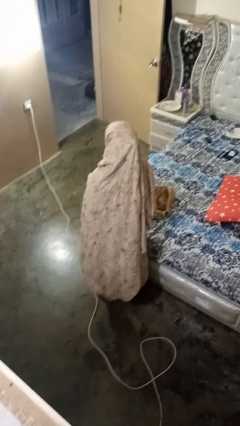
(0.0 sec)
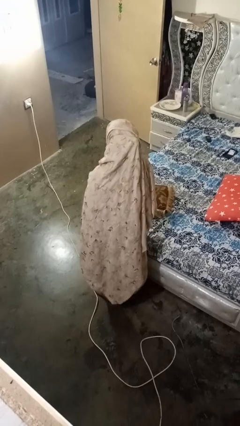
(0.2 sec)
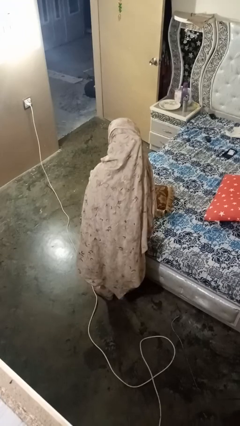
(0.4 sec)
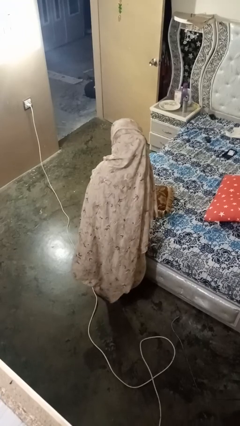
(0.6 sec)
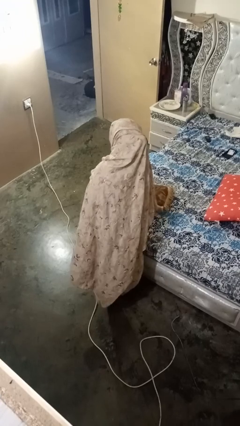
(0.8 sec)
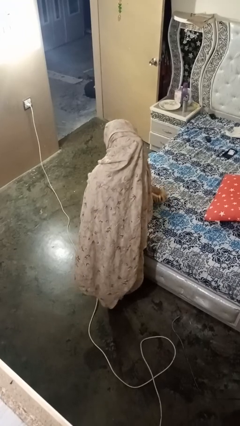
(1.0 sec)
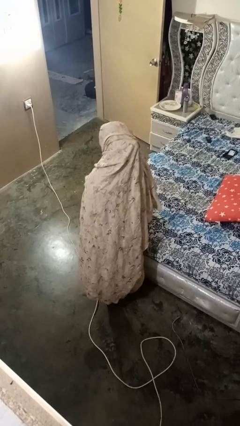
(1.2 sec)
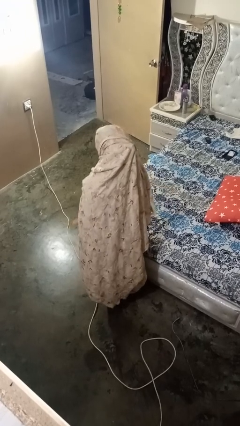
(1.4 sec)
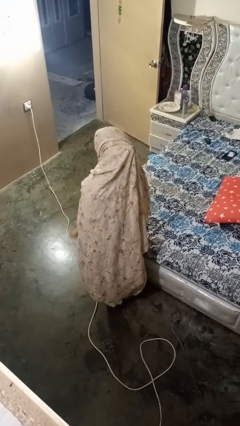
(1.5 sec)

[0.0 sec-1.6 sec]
person picks up object from bed

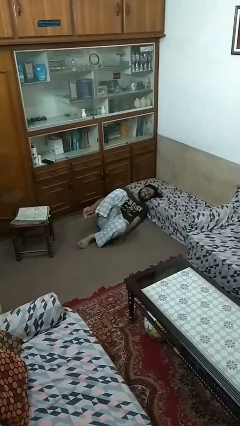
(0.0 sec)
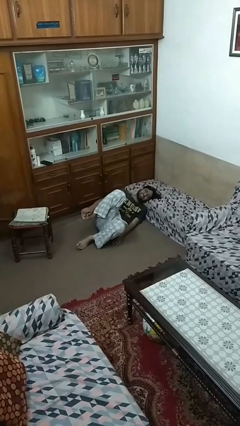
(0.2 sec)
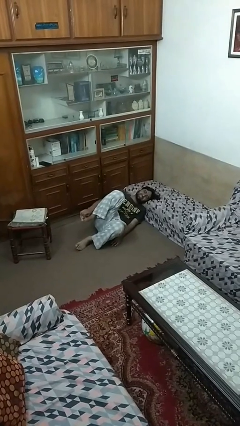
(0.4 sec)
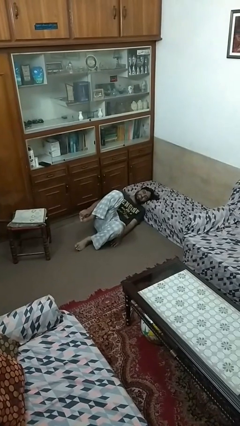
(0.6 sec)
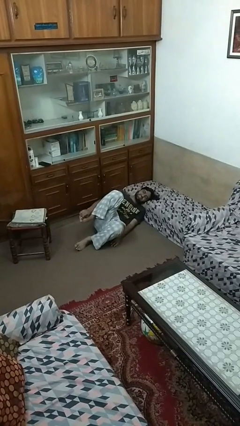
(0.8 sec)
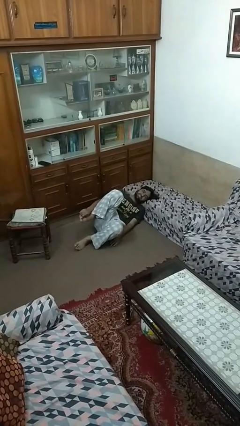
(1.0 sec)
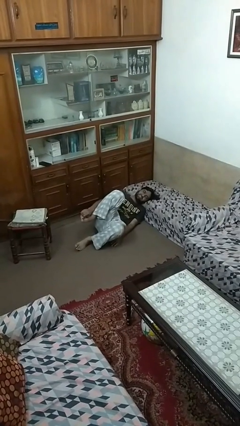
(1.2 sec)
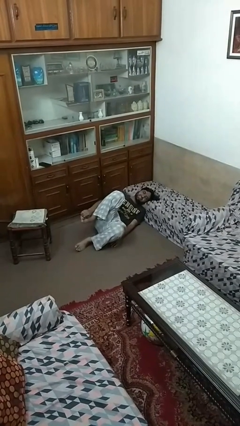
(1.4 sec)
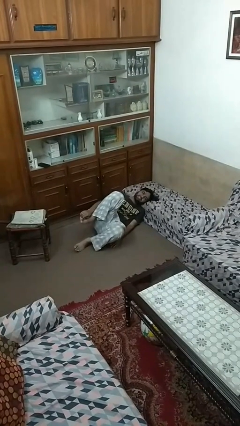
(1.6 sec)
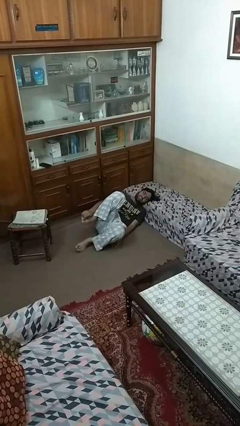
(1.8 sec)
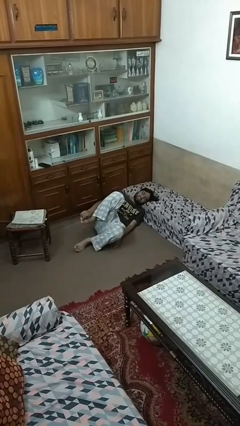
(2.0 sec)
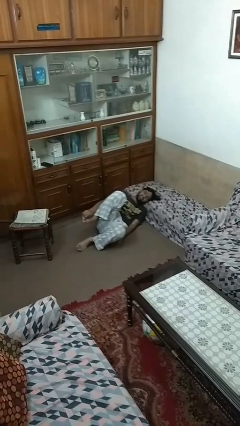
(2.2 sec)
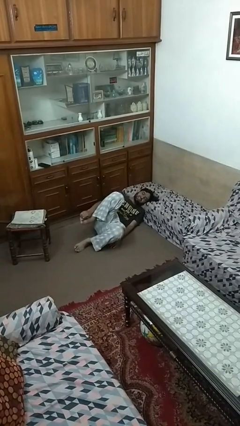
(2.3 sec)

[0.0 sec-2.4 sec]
person lies down on floor

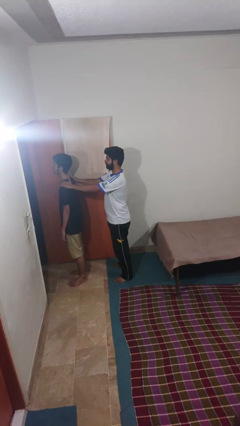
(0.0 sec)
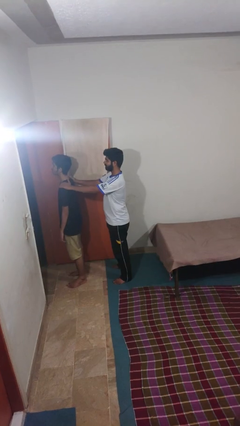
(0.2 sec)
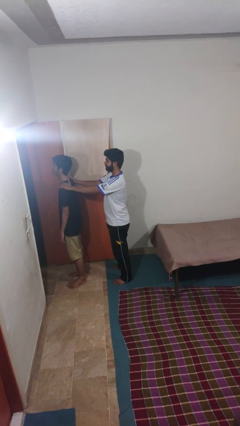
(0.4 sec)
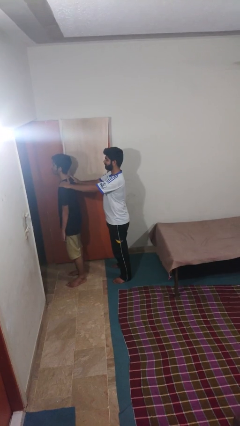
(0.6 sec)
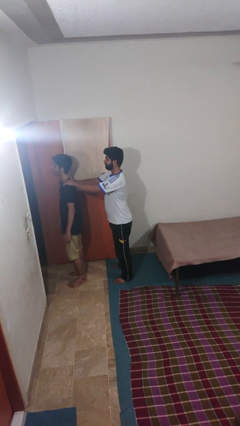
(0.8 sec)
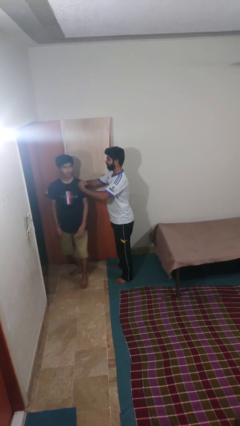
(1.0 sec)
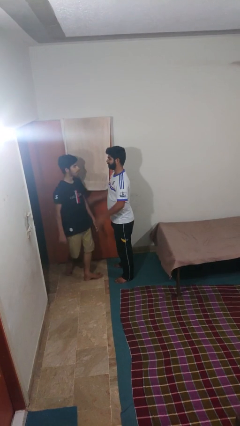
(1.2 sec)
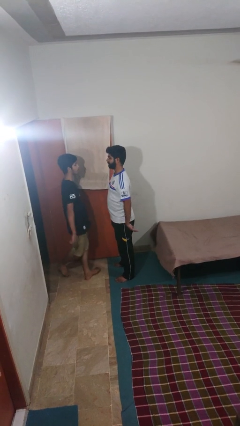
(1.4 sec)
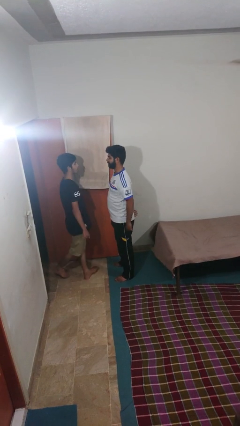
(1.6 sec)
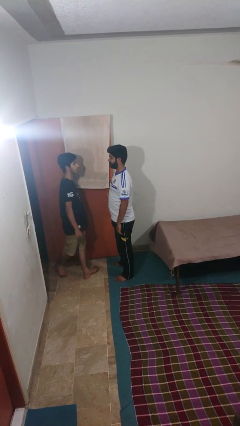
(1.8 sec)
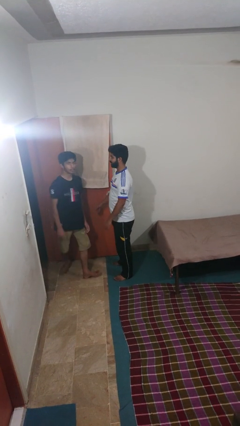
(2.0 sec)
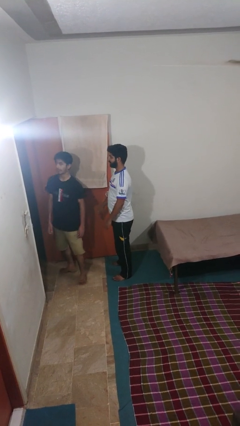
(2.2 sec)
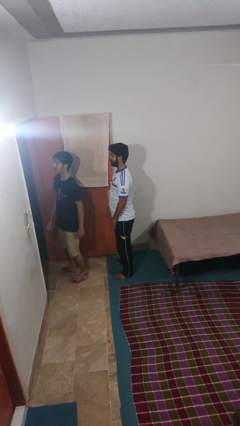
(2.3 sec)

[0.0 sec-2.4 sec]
person spins person around

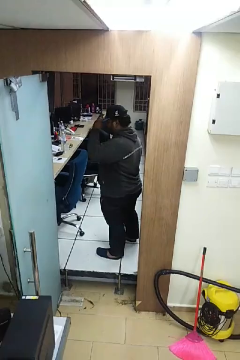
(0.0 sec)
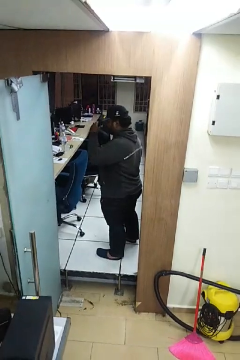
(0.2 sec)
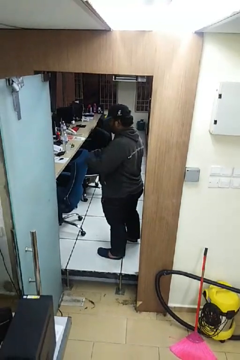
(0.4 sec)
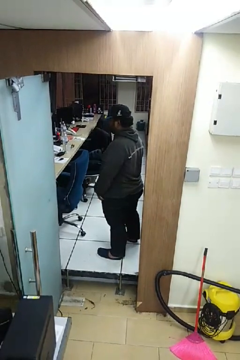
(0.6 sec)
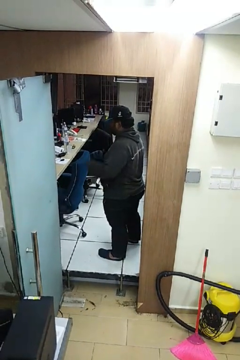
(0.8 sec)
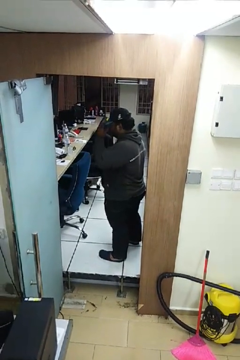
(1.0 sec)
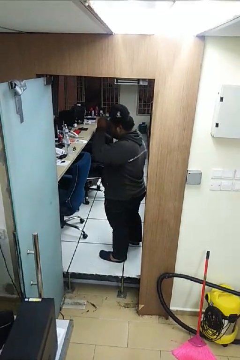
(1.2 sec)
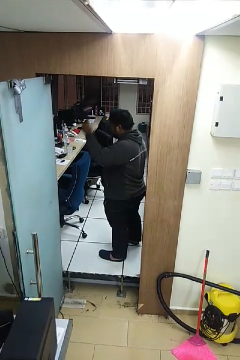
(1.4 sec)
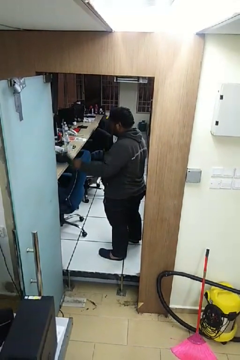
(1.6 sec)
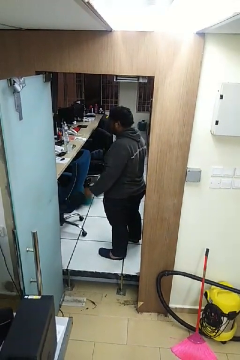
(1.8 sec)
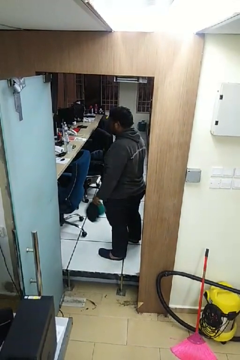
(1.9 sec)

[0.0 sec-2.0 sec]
person takes off hat

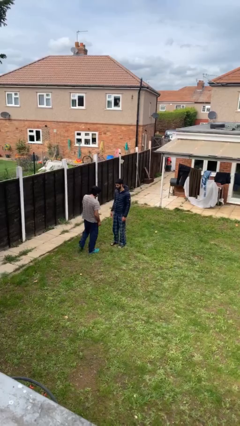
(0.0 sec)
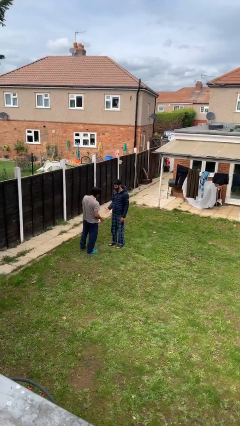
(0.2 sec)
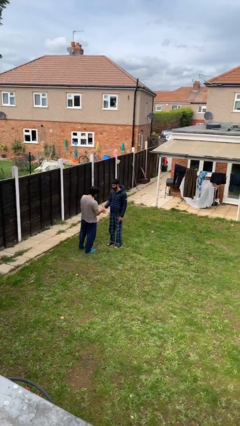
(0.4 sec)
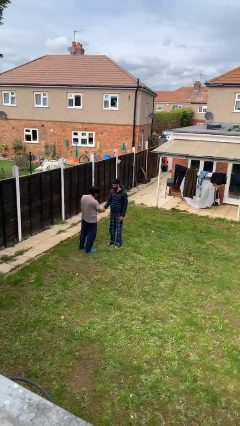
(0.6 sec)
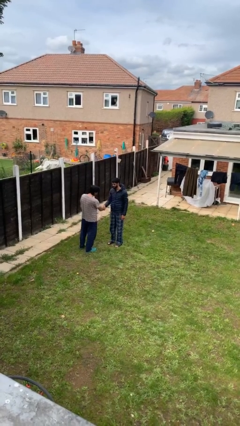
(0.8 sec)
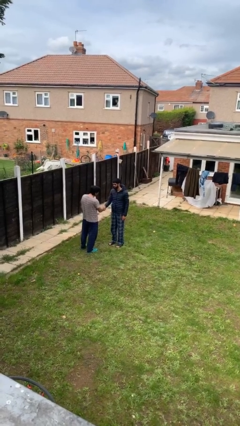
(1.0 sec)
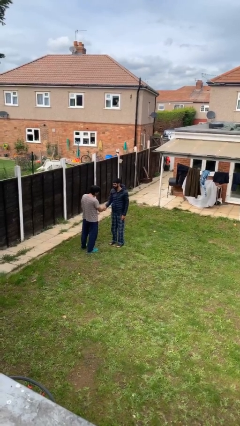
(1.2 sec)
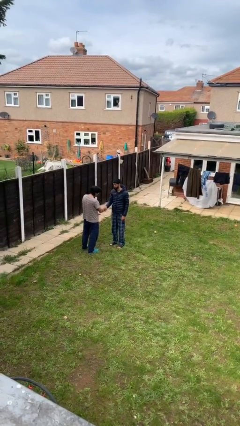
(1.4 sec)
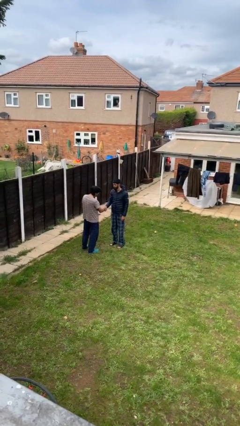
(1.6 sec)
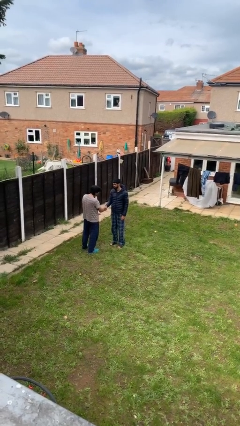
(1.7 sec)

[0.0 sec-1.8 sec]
person shakes hand

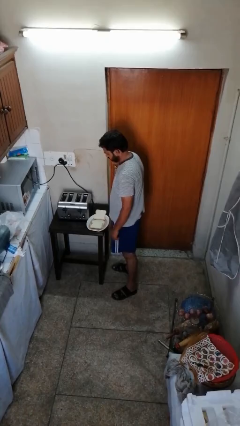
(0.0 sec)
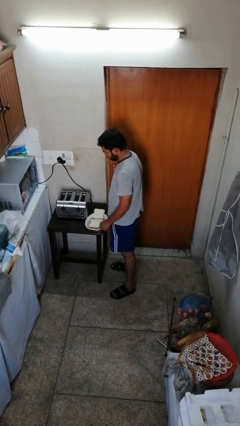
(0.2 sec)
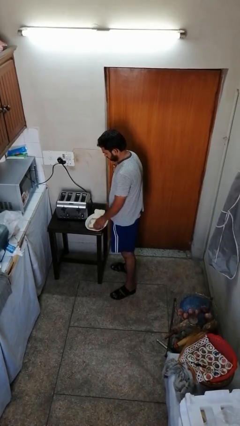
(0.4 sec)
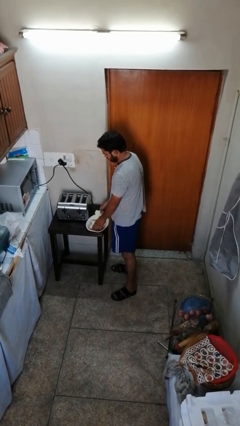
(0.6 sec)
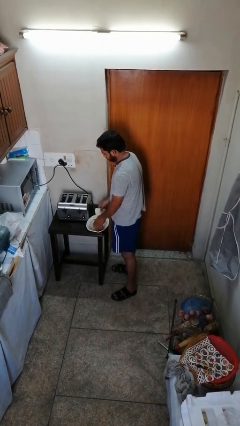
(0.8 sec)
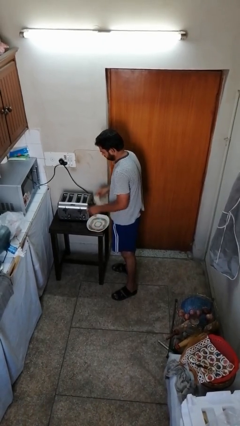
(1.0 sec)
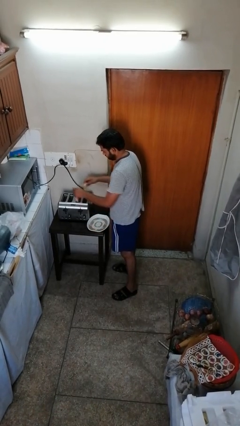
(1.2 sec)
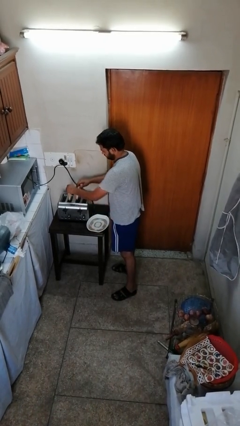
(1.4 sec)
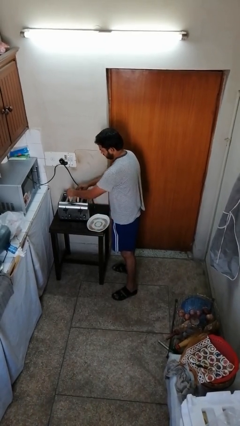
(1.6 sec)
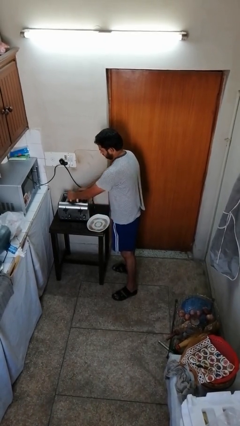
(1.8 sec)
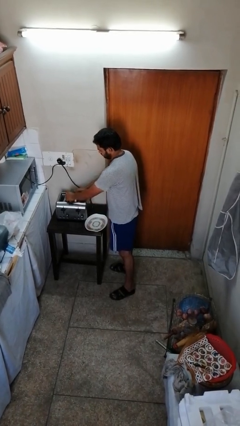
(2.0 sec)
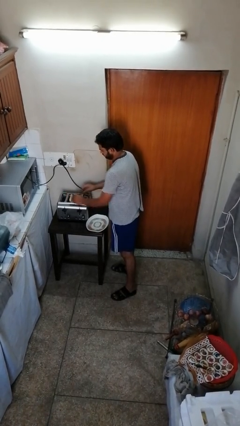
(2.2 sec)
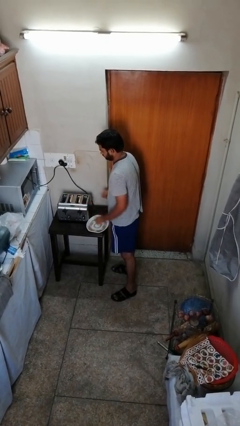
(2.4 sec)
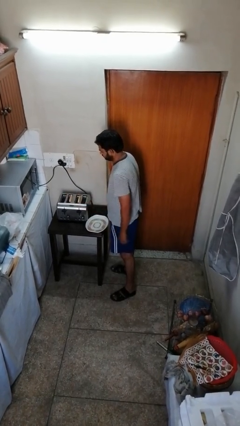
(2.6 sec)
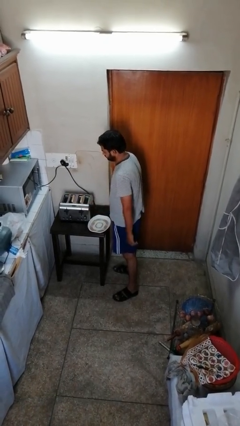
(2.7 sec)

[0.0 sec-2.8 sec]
person puts object into toaster

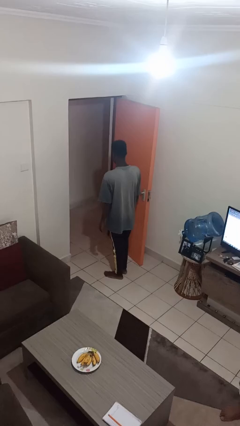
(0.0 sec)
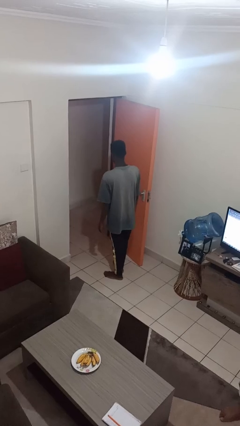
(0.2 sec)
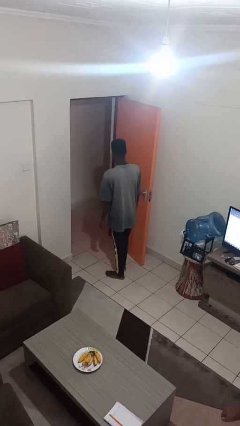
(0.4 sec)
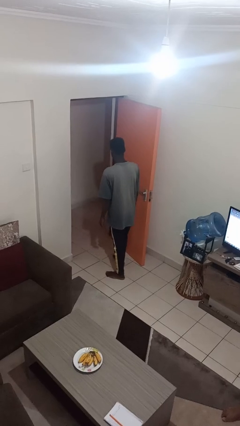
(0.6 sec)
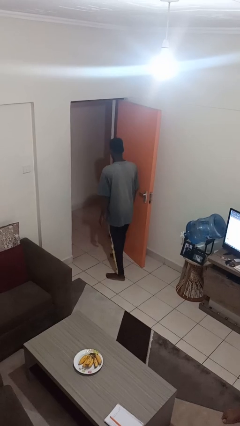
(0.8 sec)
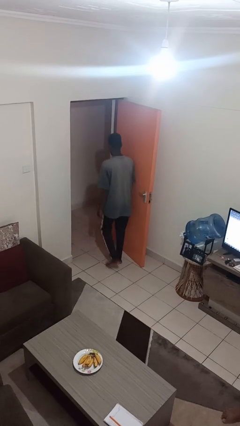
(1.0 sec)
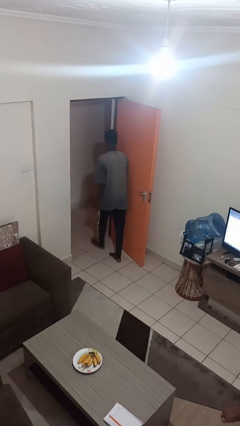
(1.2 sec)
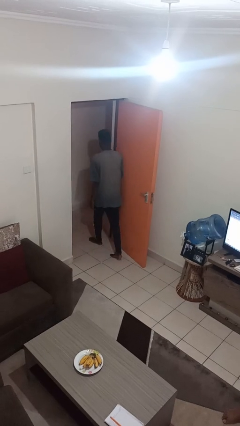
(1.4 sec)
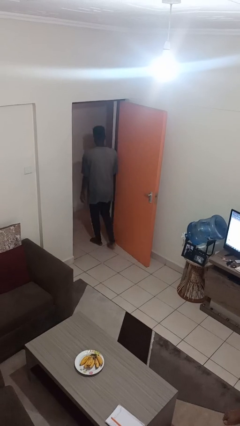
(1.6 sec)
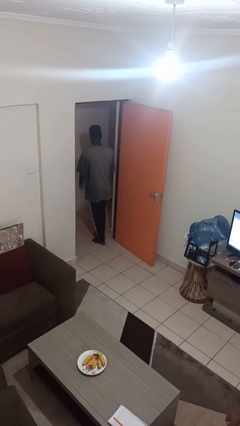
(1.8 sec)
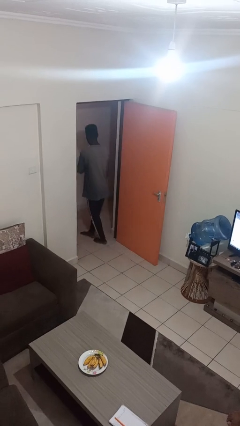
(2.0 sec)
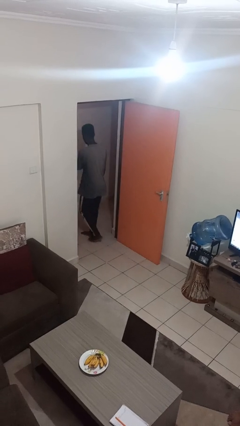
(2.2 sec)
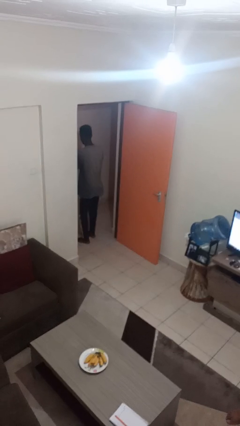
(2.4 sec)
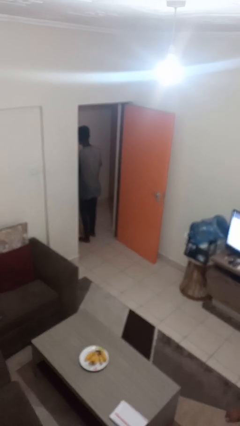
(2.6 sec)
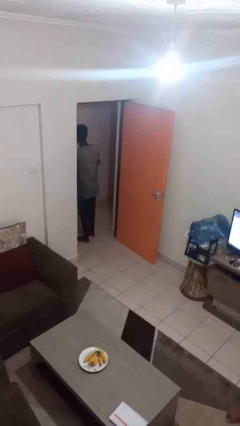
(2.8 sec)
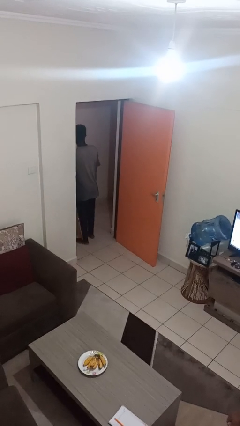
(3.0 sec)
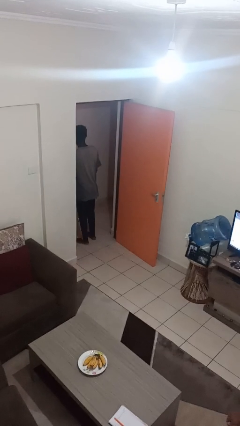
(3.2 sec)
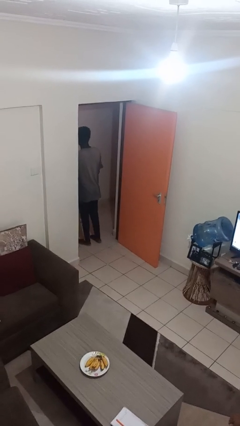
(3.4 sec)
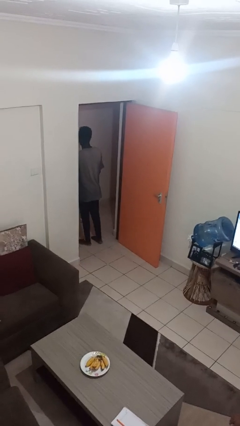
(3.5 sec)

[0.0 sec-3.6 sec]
person bumps into wall

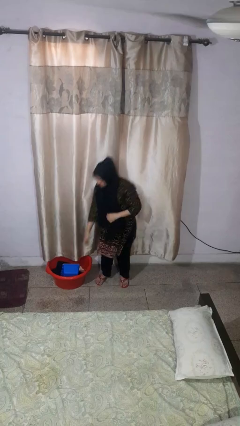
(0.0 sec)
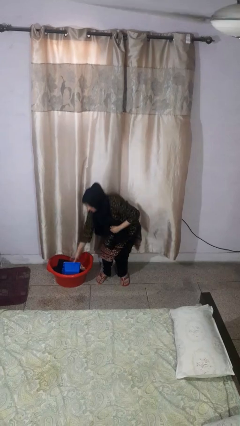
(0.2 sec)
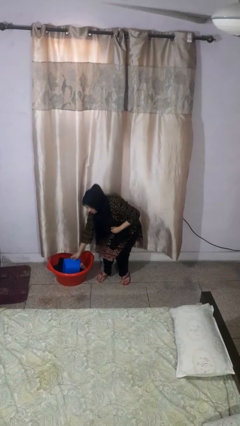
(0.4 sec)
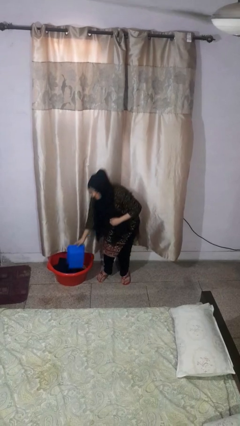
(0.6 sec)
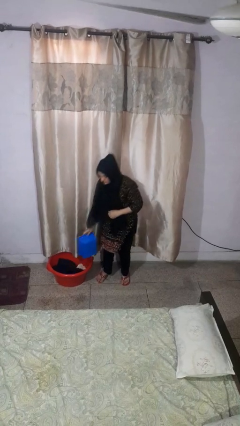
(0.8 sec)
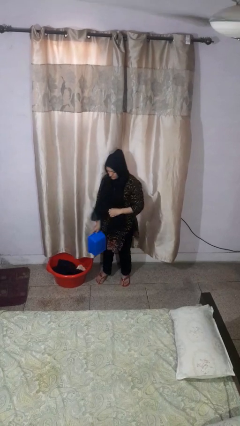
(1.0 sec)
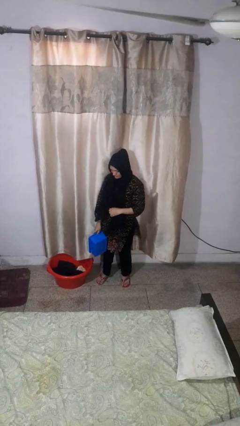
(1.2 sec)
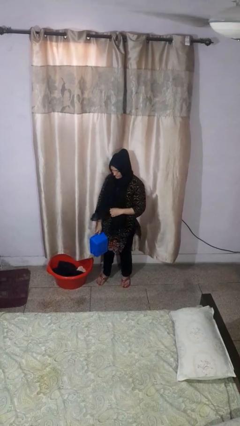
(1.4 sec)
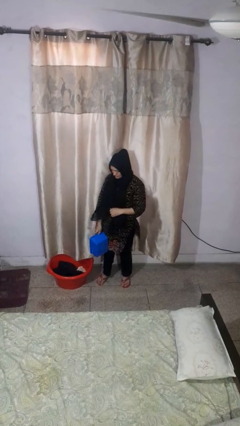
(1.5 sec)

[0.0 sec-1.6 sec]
person takes object from basket
